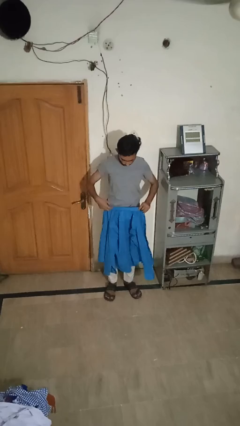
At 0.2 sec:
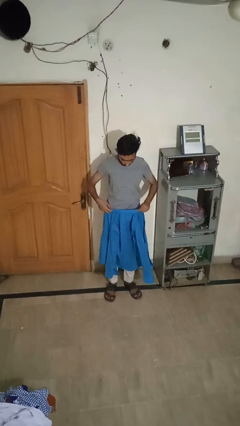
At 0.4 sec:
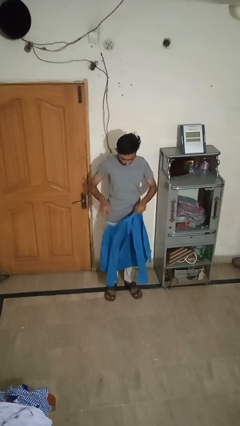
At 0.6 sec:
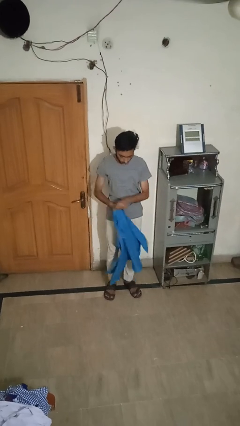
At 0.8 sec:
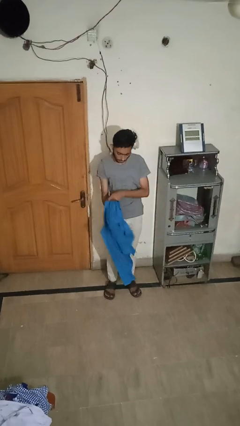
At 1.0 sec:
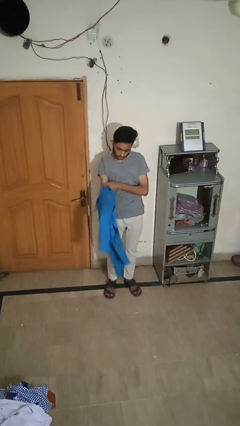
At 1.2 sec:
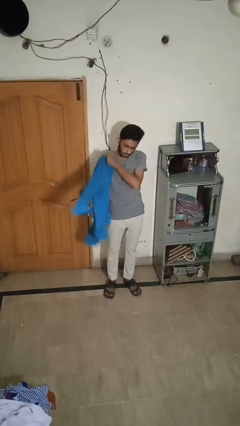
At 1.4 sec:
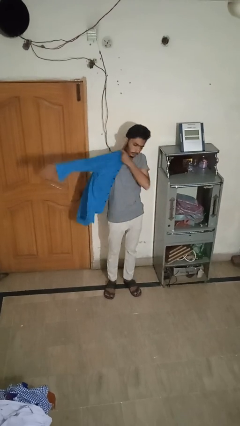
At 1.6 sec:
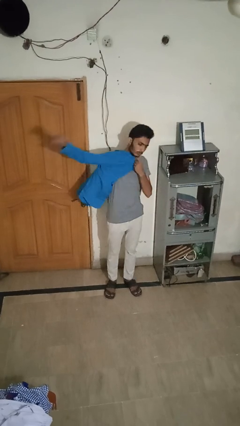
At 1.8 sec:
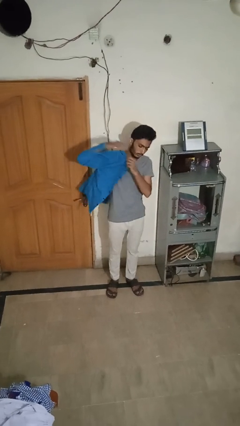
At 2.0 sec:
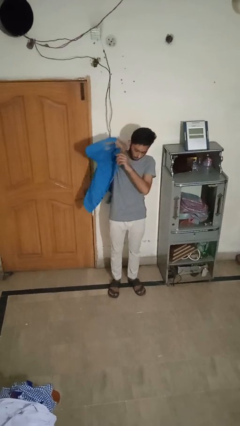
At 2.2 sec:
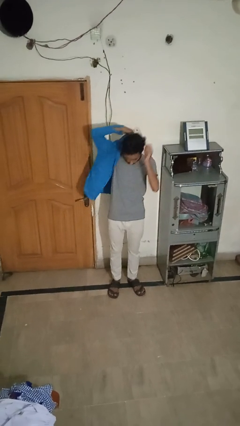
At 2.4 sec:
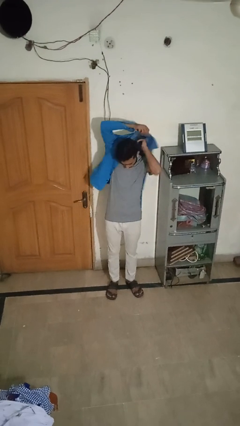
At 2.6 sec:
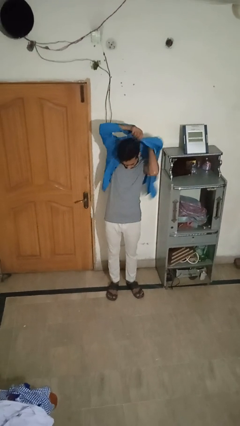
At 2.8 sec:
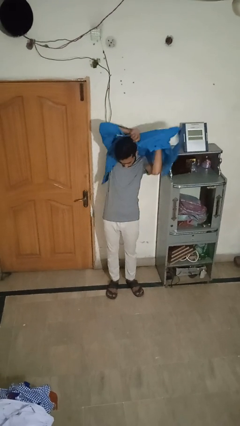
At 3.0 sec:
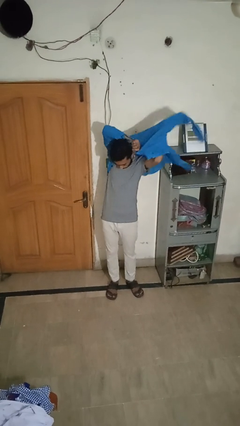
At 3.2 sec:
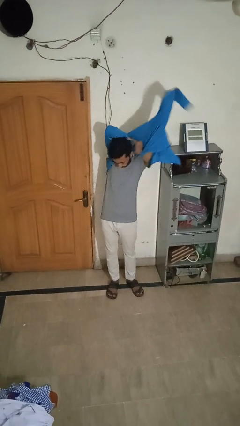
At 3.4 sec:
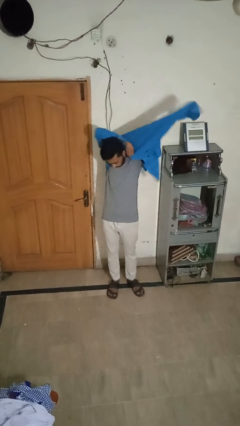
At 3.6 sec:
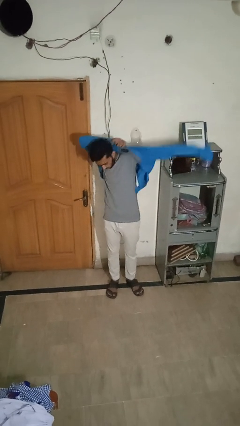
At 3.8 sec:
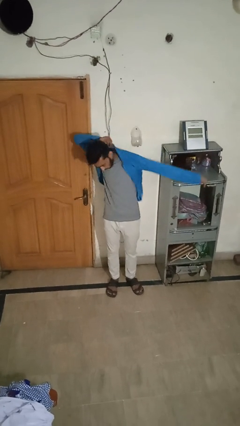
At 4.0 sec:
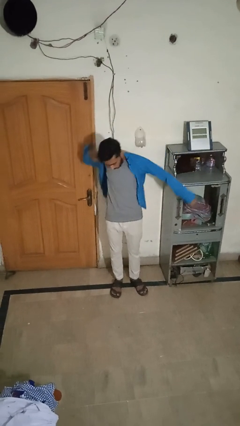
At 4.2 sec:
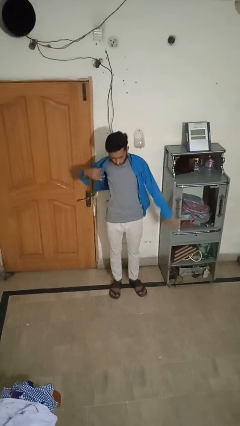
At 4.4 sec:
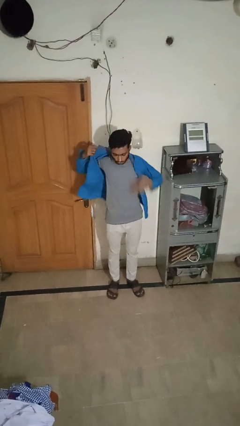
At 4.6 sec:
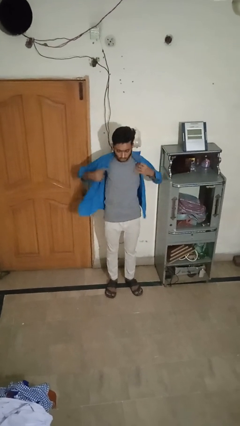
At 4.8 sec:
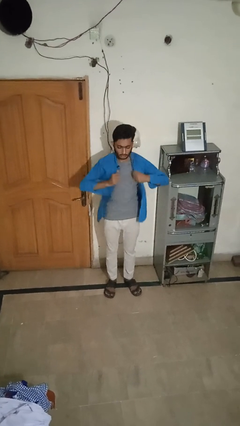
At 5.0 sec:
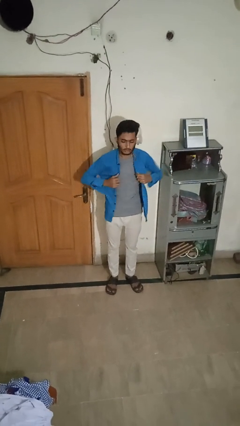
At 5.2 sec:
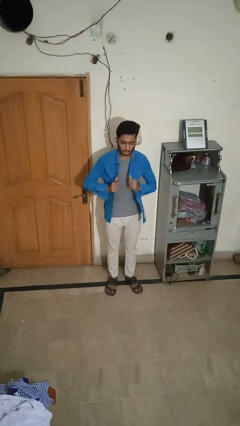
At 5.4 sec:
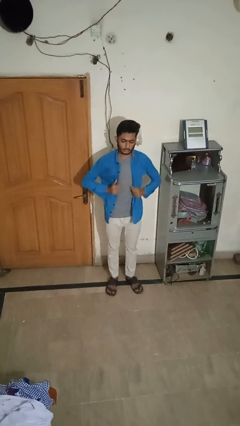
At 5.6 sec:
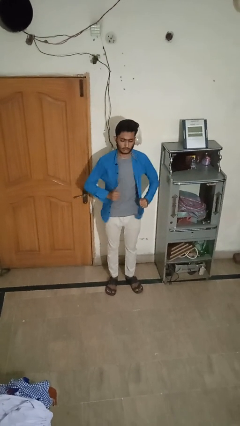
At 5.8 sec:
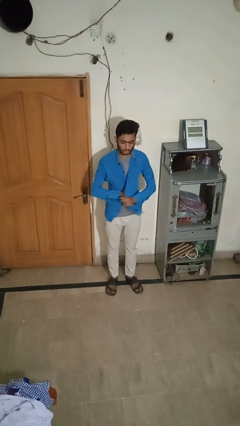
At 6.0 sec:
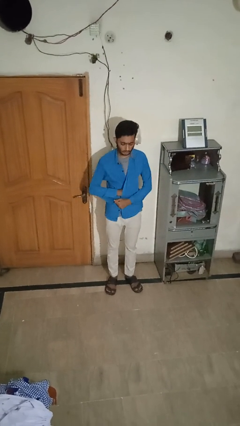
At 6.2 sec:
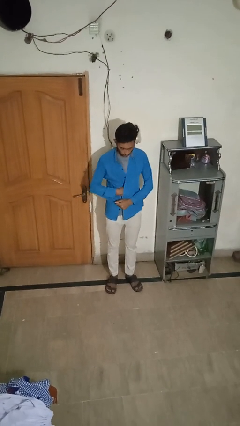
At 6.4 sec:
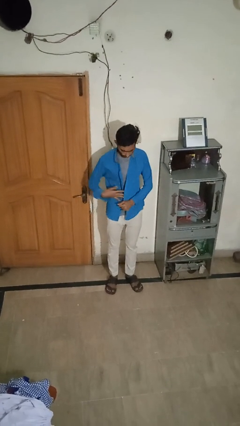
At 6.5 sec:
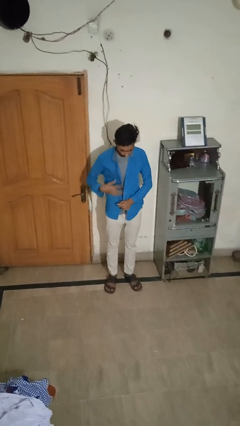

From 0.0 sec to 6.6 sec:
person puts on shirt

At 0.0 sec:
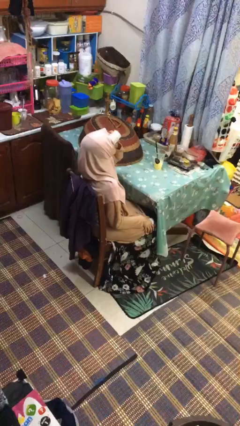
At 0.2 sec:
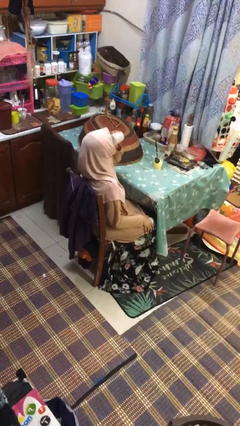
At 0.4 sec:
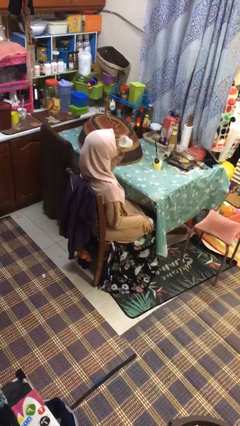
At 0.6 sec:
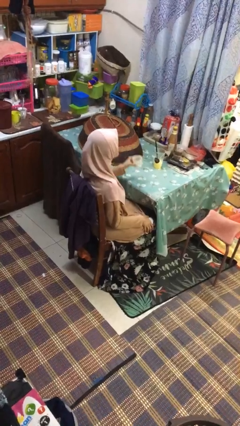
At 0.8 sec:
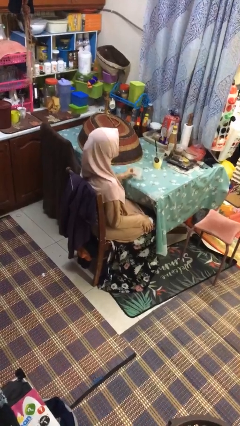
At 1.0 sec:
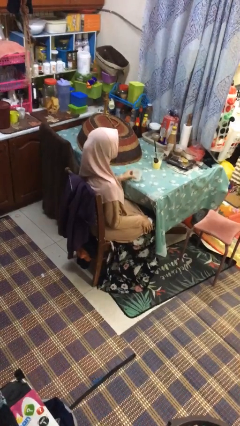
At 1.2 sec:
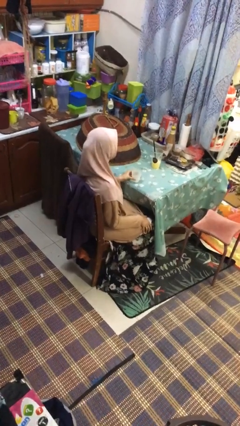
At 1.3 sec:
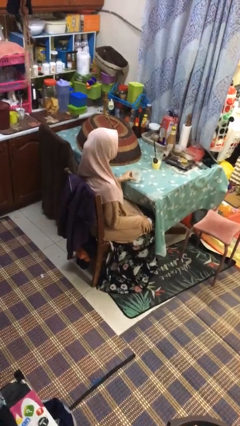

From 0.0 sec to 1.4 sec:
person puts down object on table

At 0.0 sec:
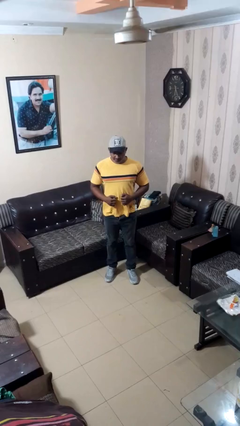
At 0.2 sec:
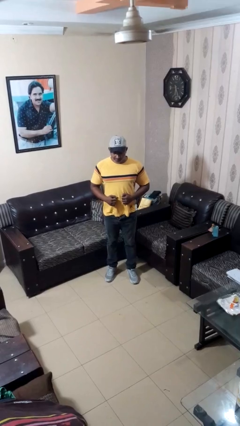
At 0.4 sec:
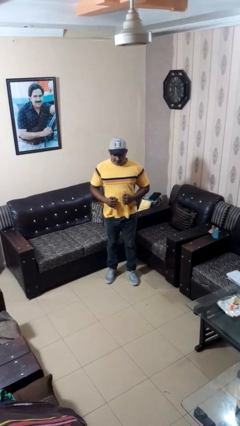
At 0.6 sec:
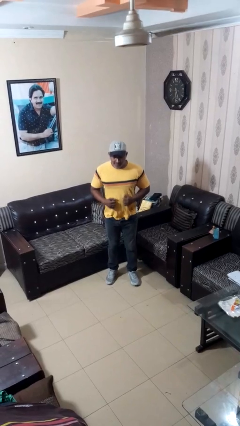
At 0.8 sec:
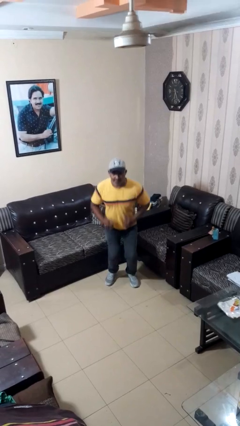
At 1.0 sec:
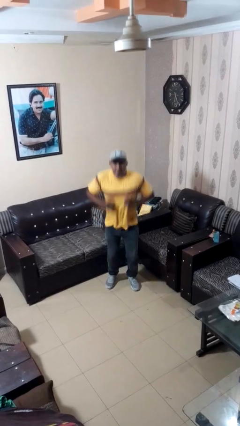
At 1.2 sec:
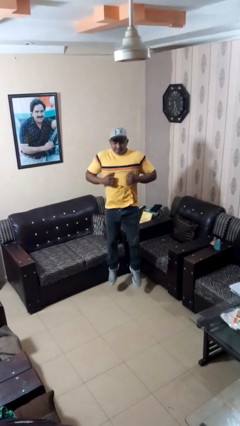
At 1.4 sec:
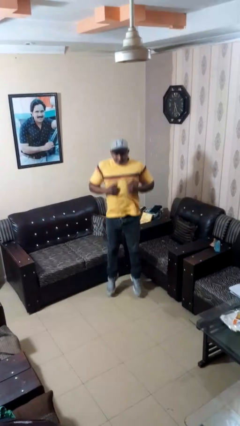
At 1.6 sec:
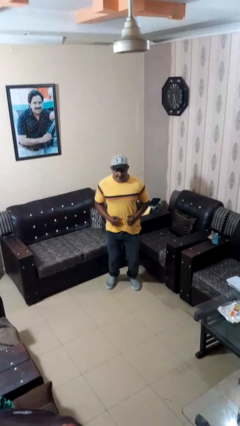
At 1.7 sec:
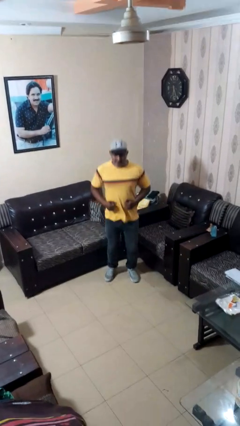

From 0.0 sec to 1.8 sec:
person jumps

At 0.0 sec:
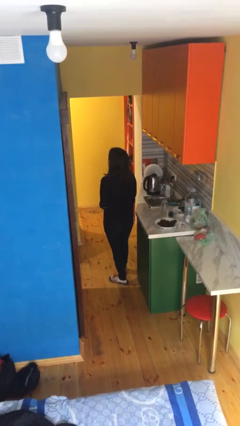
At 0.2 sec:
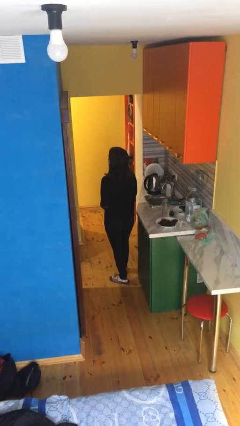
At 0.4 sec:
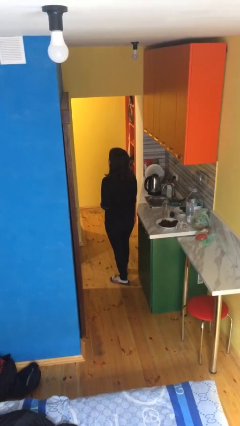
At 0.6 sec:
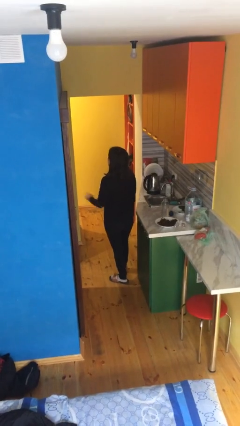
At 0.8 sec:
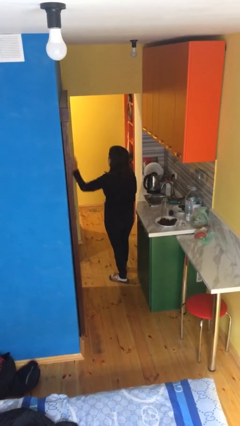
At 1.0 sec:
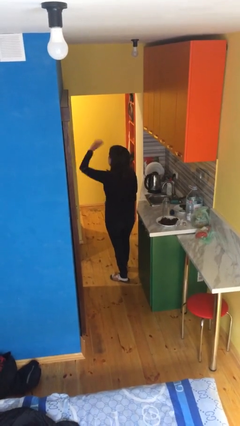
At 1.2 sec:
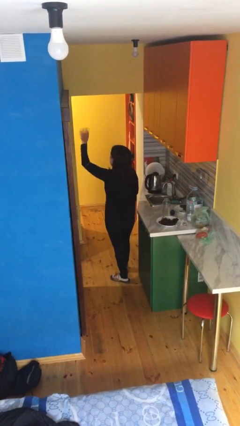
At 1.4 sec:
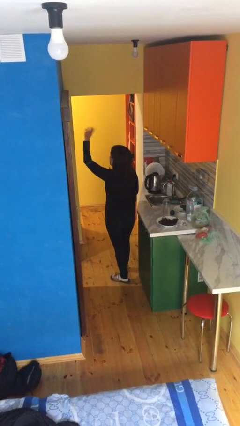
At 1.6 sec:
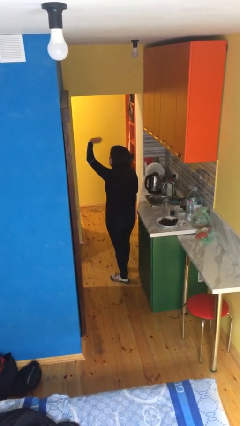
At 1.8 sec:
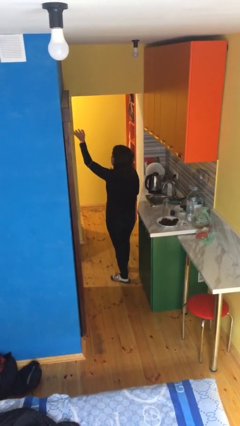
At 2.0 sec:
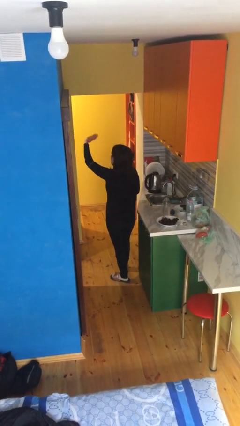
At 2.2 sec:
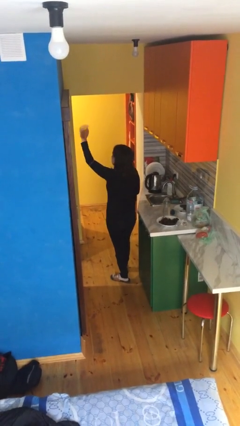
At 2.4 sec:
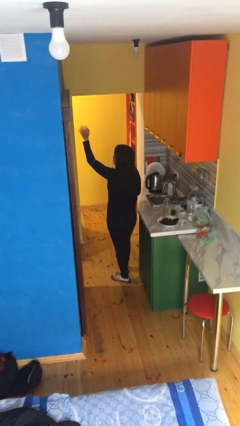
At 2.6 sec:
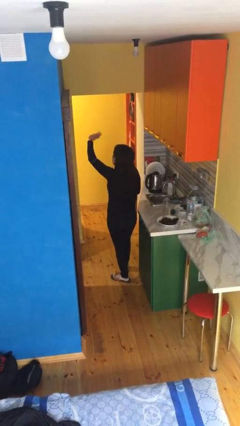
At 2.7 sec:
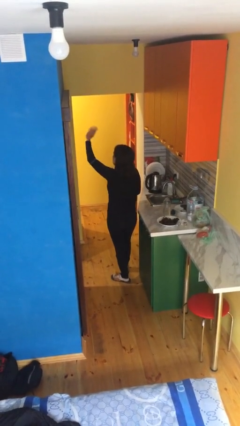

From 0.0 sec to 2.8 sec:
person waves at person

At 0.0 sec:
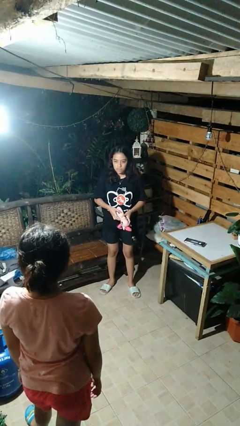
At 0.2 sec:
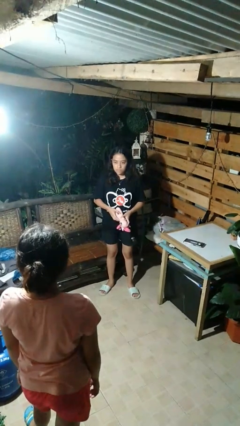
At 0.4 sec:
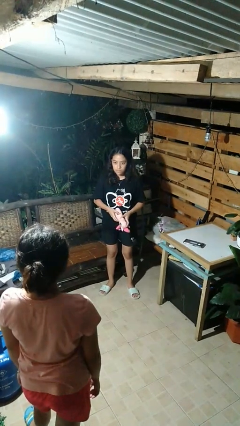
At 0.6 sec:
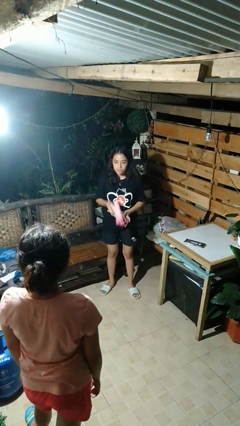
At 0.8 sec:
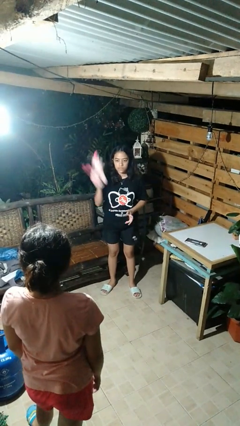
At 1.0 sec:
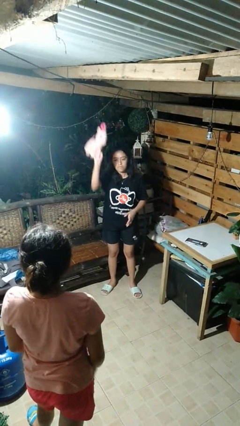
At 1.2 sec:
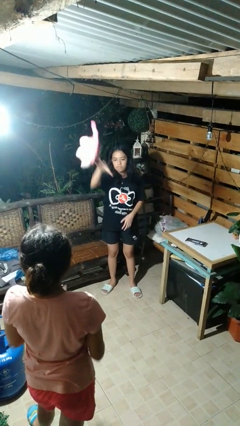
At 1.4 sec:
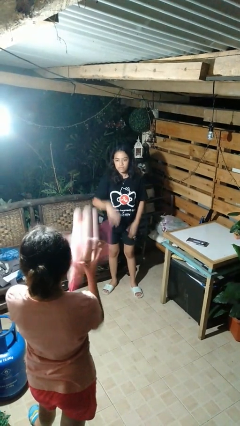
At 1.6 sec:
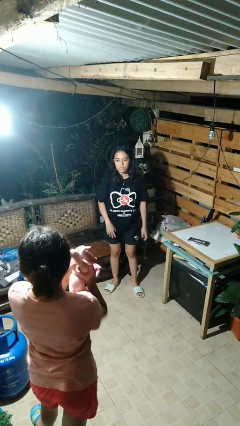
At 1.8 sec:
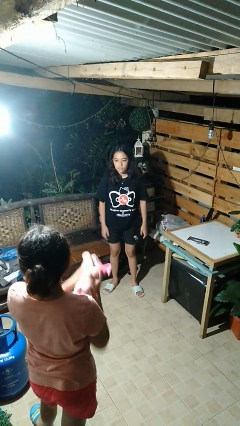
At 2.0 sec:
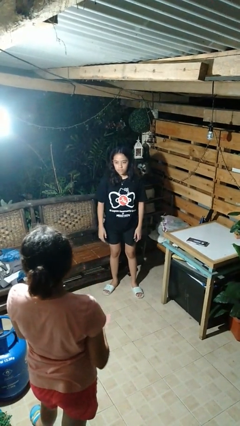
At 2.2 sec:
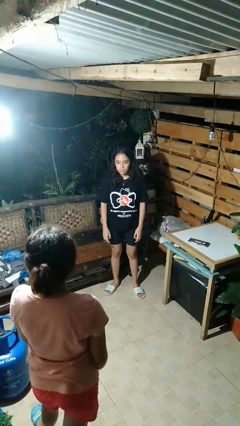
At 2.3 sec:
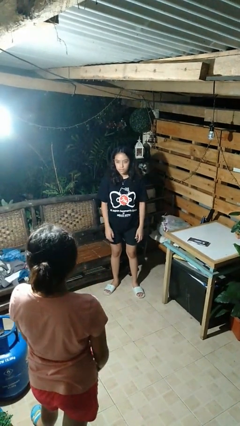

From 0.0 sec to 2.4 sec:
person throws object to person

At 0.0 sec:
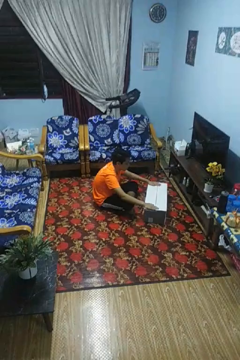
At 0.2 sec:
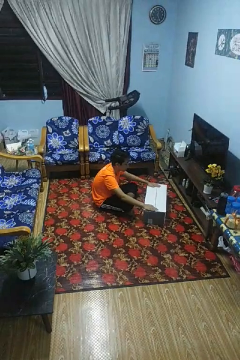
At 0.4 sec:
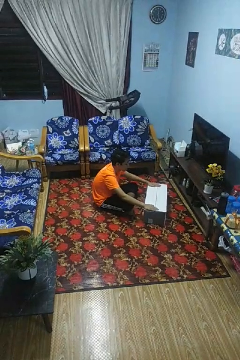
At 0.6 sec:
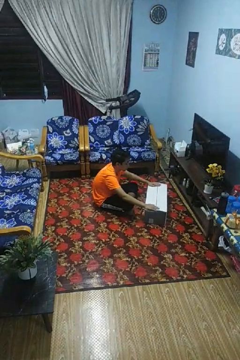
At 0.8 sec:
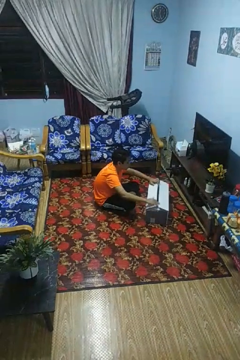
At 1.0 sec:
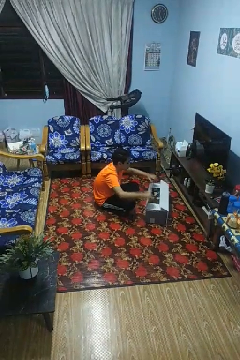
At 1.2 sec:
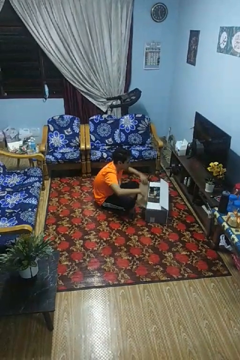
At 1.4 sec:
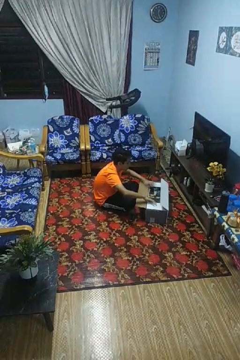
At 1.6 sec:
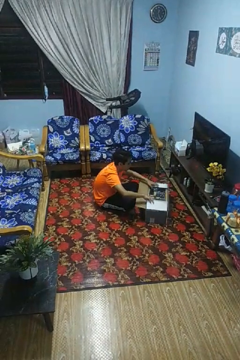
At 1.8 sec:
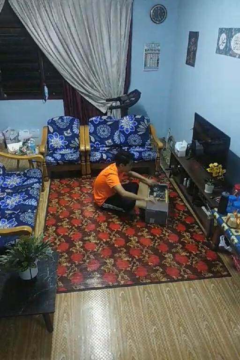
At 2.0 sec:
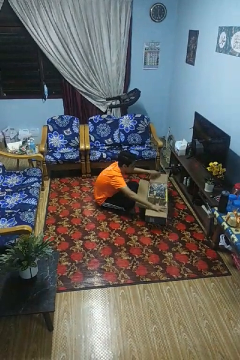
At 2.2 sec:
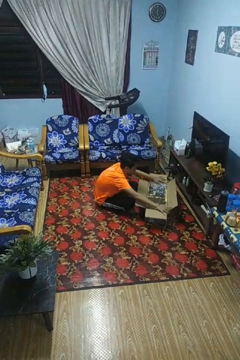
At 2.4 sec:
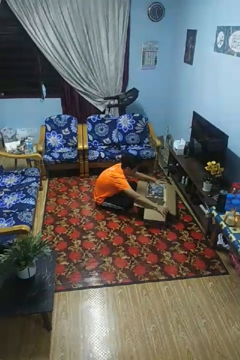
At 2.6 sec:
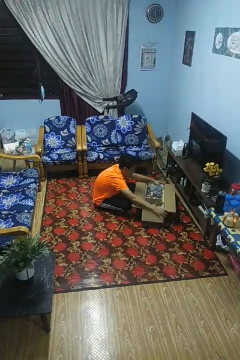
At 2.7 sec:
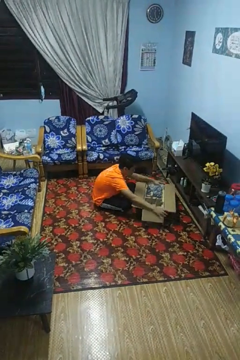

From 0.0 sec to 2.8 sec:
person opens box
